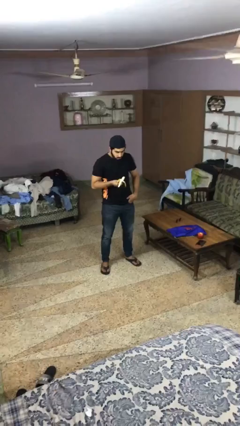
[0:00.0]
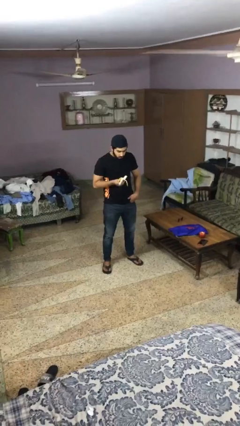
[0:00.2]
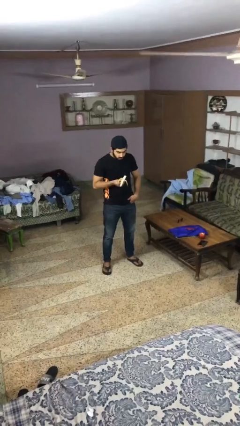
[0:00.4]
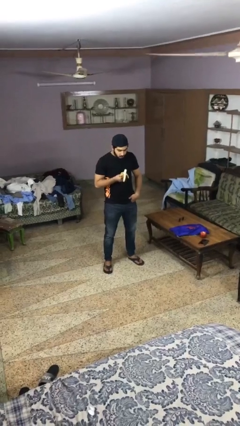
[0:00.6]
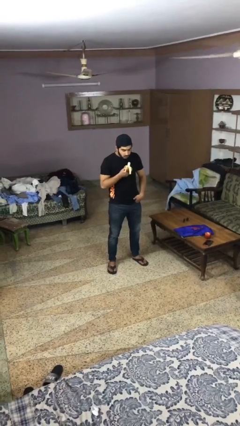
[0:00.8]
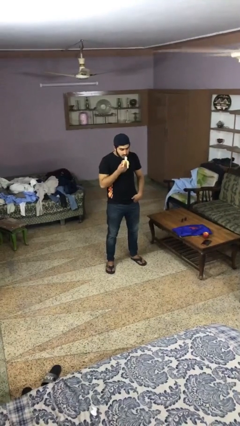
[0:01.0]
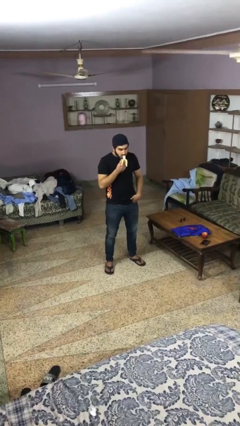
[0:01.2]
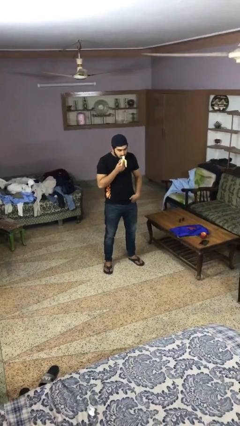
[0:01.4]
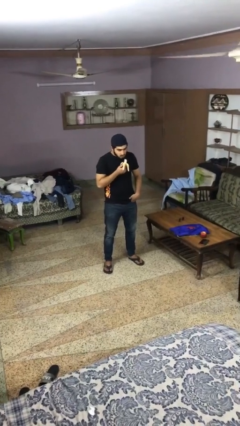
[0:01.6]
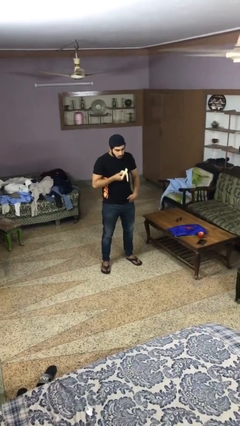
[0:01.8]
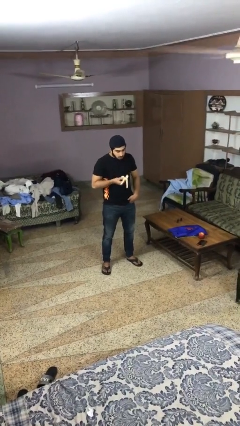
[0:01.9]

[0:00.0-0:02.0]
person eats banana

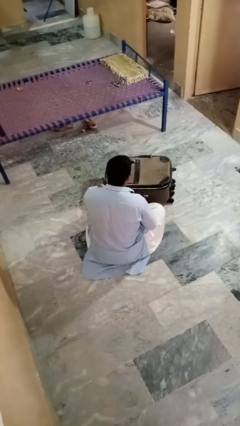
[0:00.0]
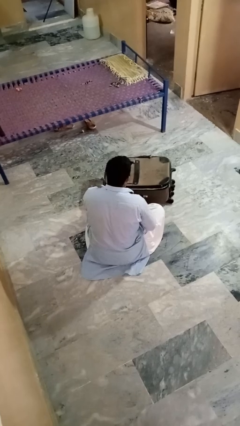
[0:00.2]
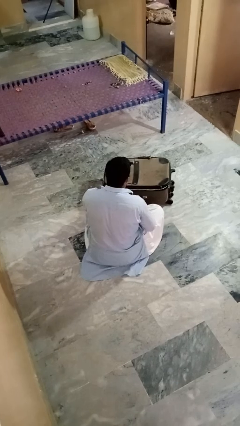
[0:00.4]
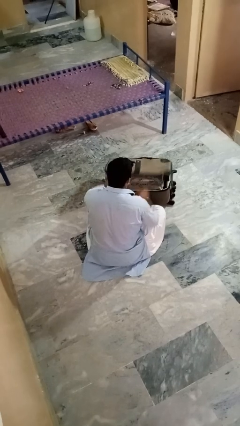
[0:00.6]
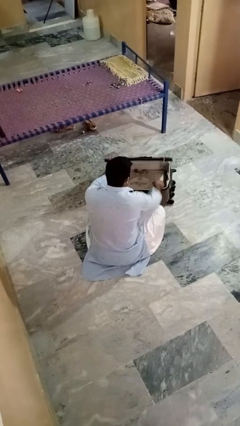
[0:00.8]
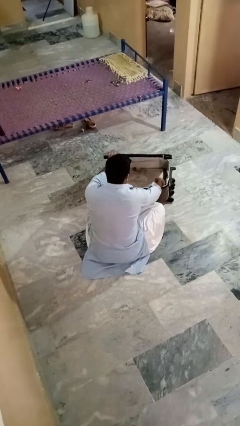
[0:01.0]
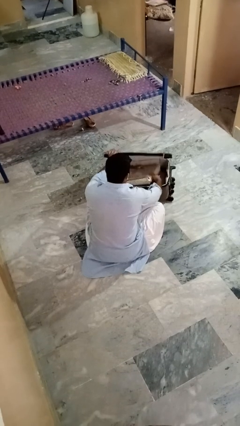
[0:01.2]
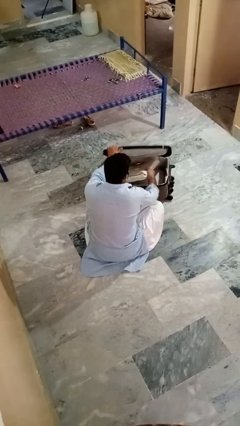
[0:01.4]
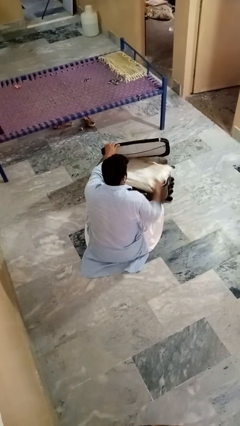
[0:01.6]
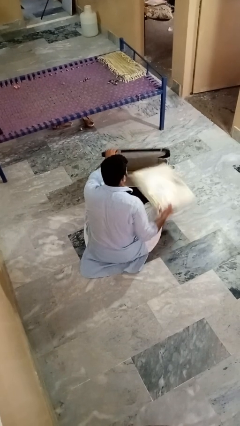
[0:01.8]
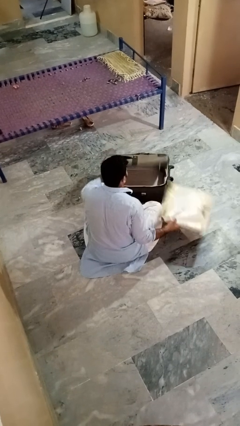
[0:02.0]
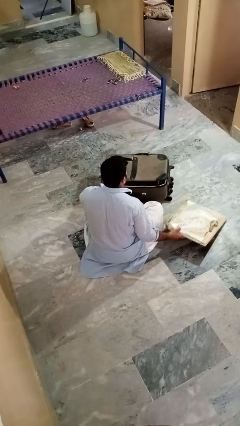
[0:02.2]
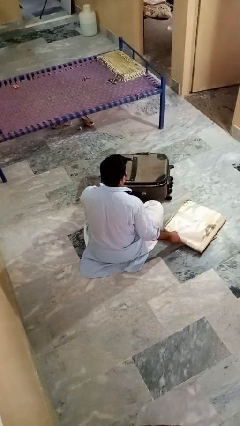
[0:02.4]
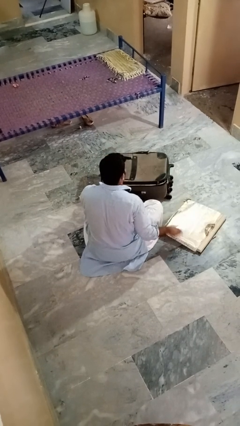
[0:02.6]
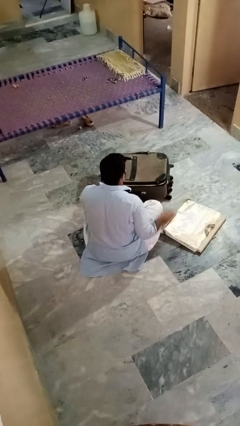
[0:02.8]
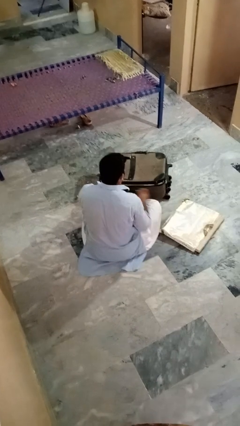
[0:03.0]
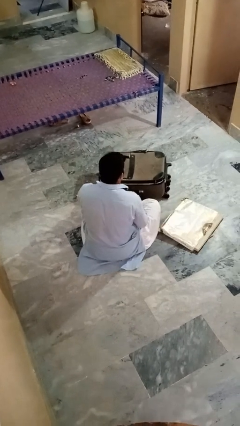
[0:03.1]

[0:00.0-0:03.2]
person takes object from bag

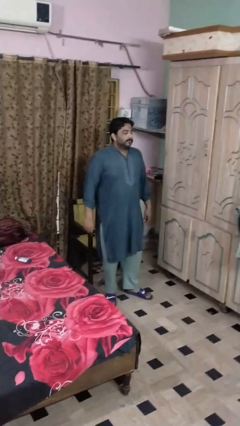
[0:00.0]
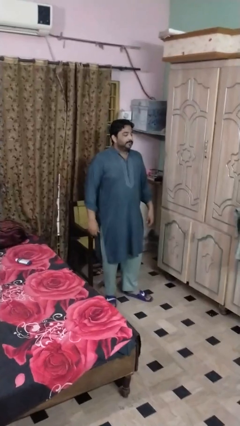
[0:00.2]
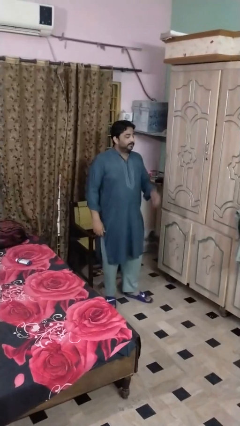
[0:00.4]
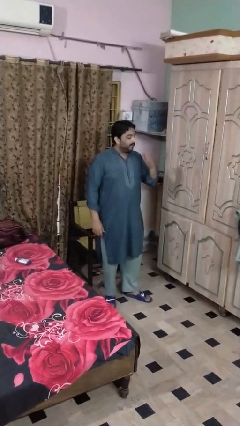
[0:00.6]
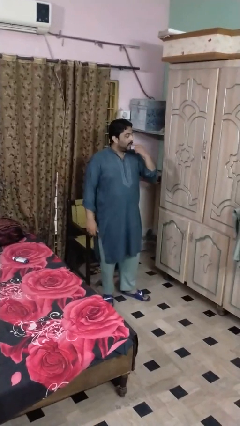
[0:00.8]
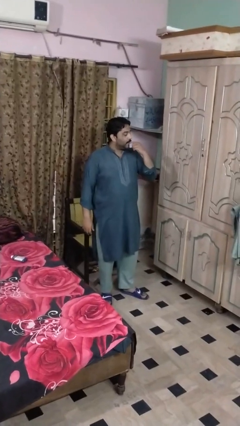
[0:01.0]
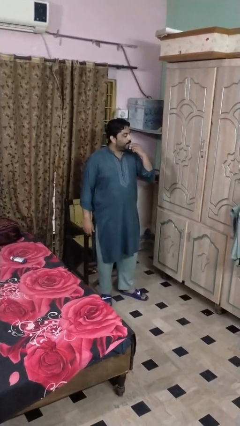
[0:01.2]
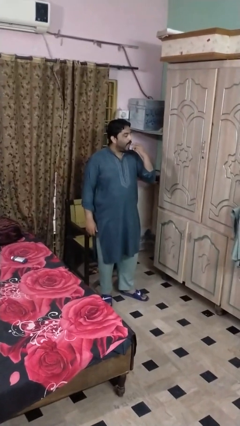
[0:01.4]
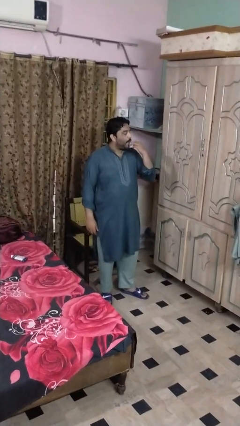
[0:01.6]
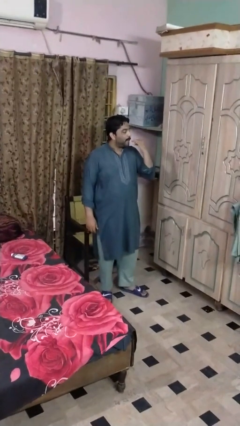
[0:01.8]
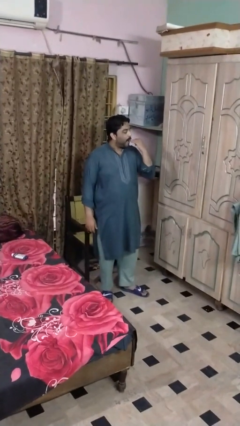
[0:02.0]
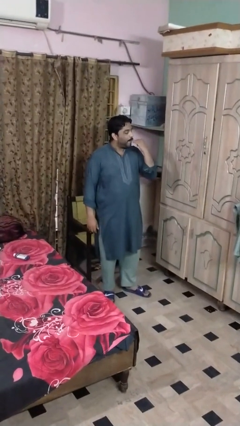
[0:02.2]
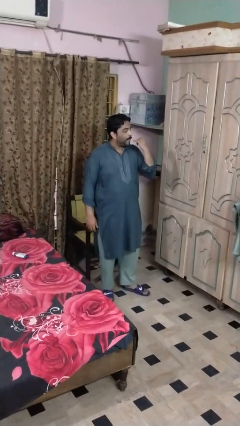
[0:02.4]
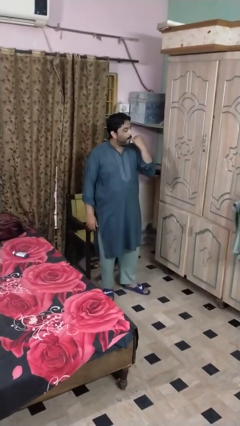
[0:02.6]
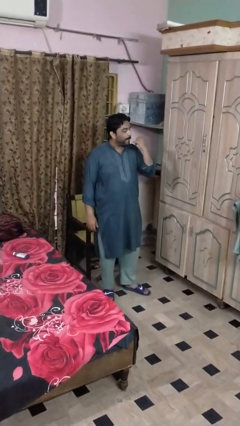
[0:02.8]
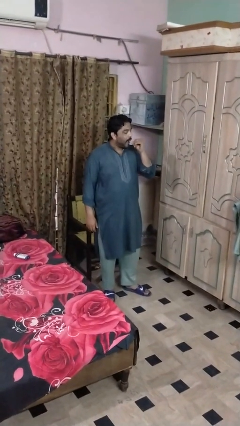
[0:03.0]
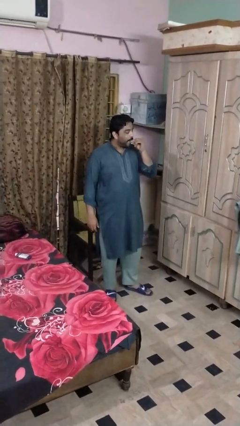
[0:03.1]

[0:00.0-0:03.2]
person licks fingers

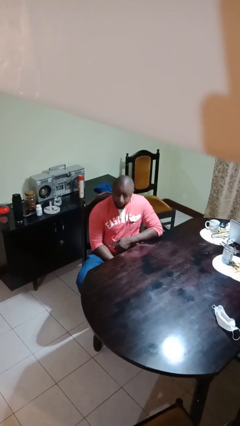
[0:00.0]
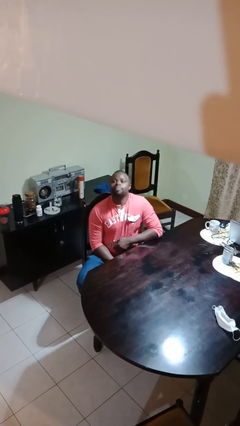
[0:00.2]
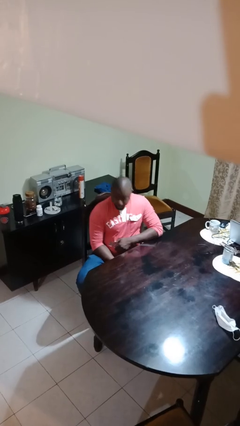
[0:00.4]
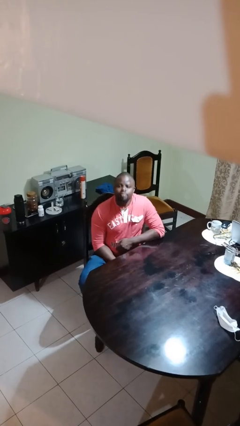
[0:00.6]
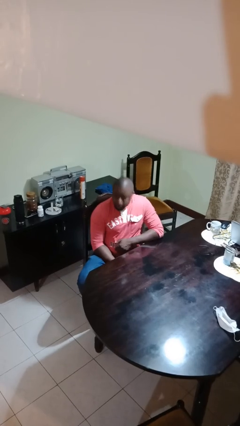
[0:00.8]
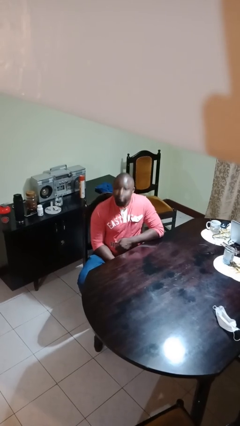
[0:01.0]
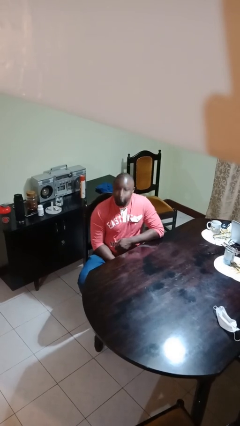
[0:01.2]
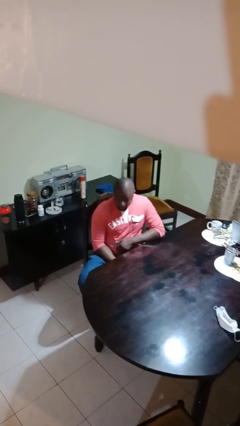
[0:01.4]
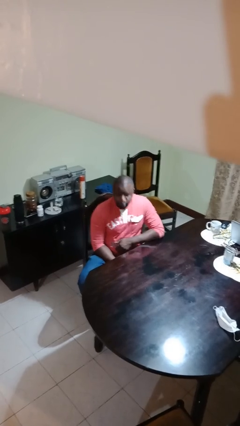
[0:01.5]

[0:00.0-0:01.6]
person nods head

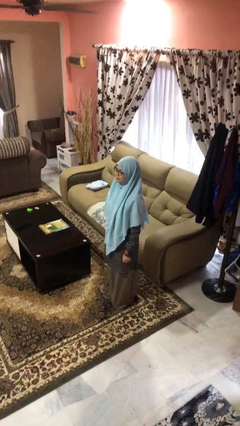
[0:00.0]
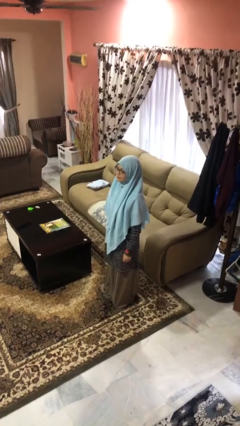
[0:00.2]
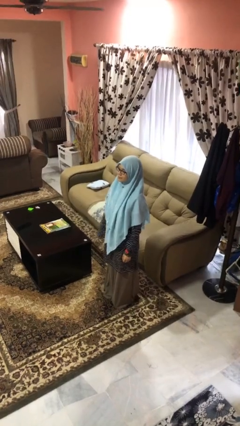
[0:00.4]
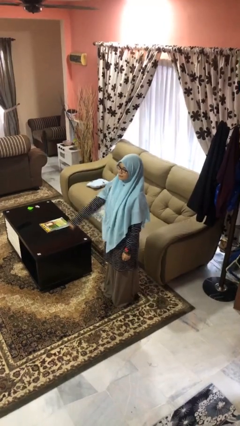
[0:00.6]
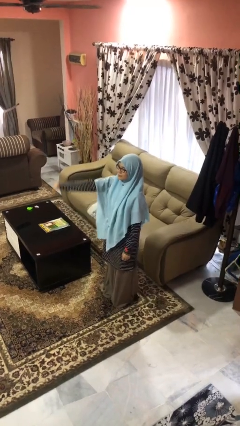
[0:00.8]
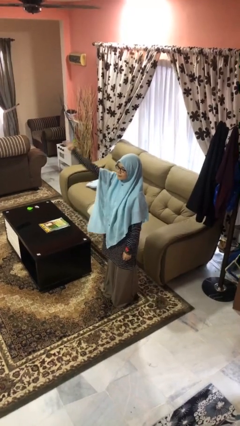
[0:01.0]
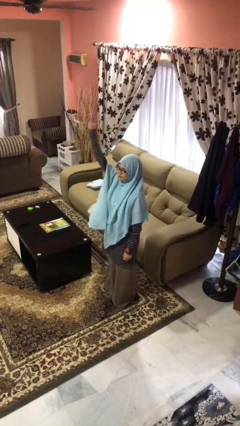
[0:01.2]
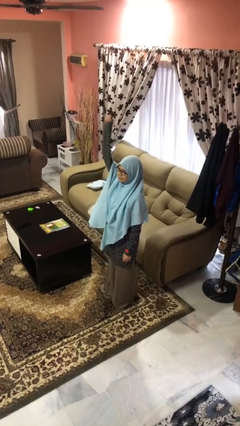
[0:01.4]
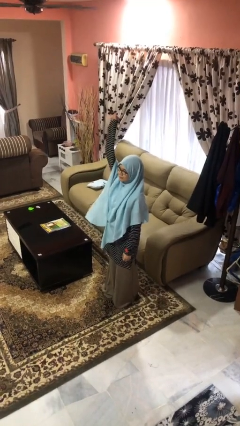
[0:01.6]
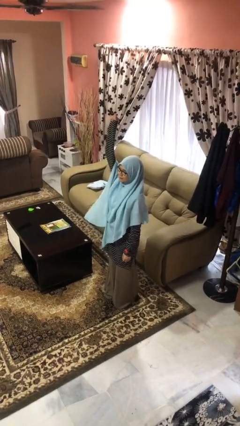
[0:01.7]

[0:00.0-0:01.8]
person gestures raise hand

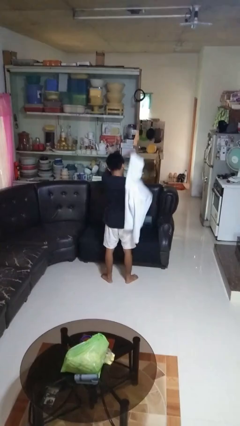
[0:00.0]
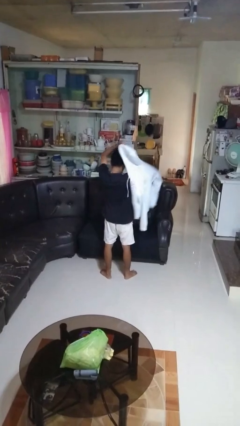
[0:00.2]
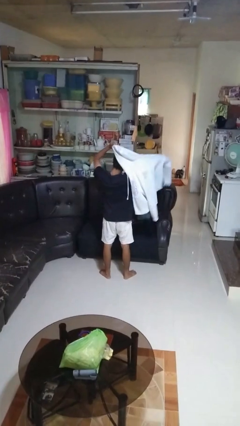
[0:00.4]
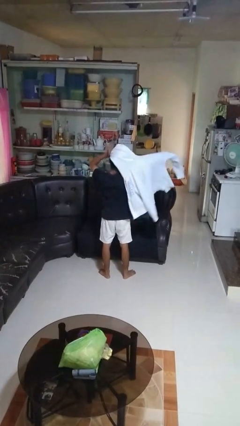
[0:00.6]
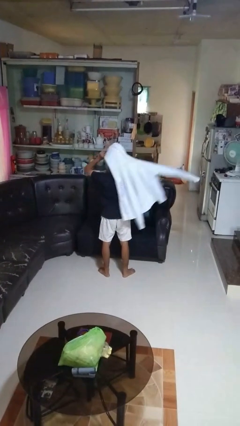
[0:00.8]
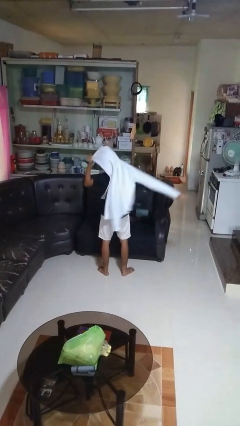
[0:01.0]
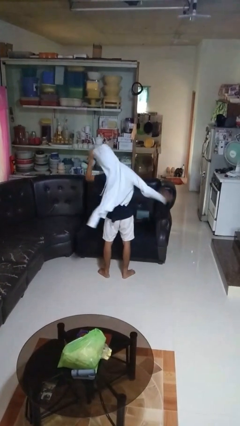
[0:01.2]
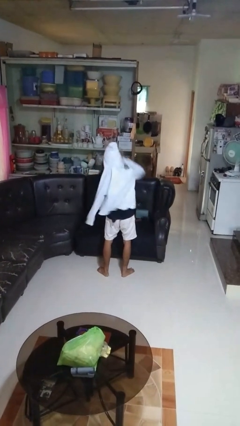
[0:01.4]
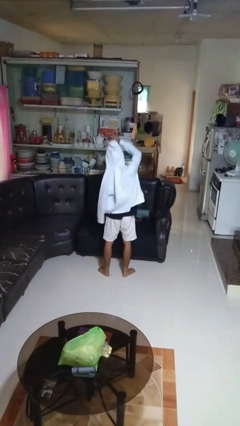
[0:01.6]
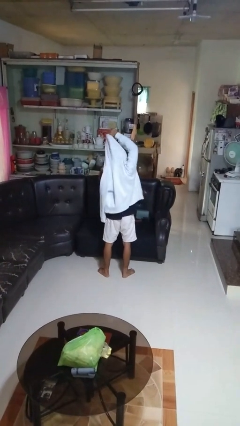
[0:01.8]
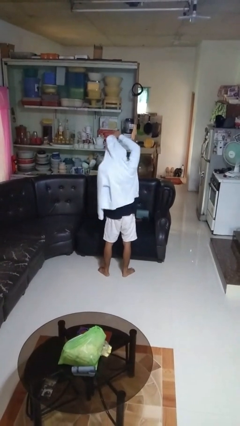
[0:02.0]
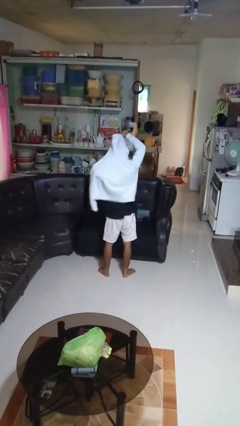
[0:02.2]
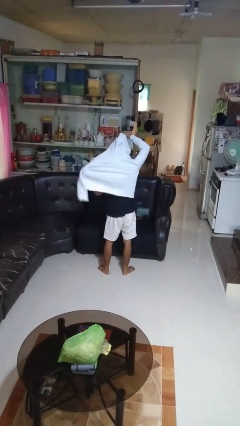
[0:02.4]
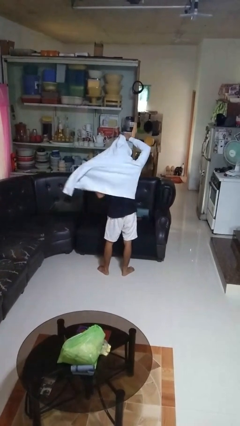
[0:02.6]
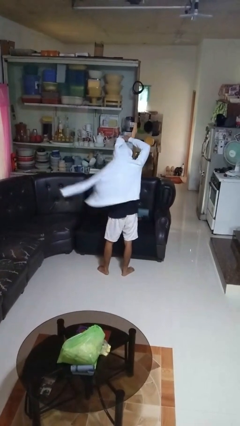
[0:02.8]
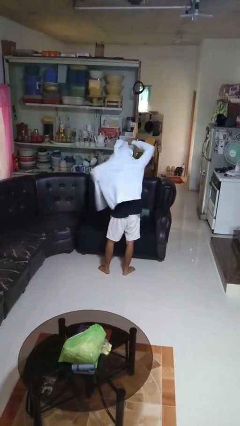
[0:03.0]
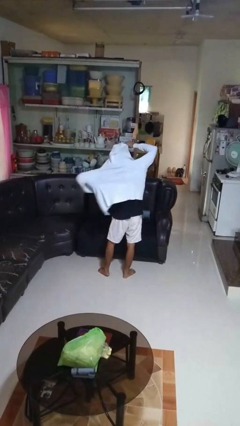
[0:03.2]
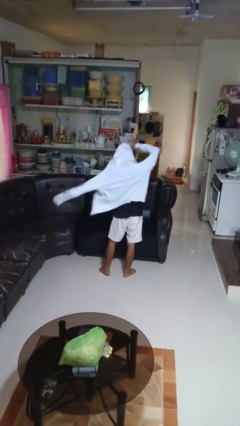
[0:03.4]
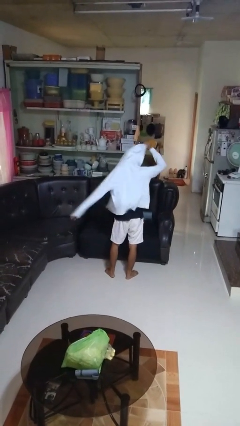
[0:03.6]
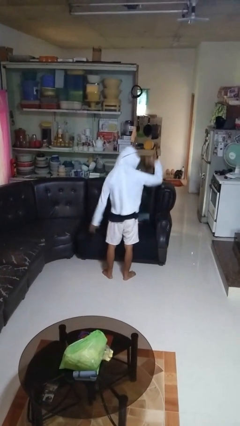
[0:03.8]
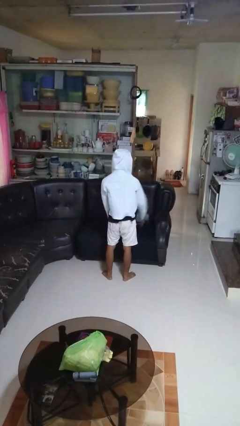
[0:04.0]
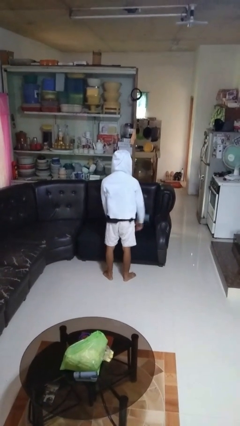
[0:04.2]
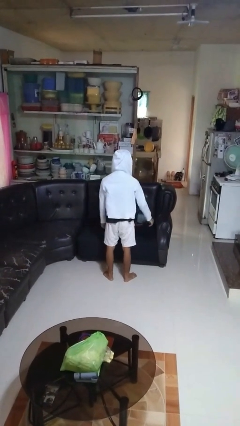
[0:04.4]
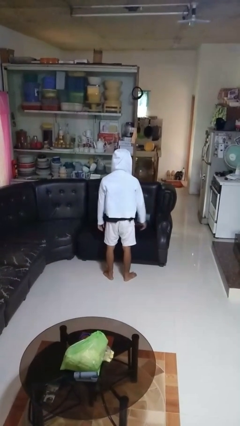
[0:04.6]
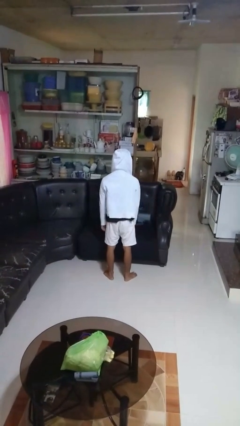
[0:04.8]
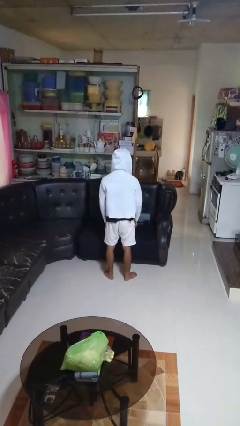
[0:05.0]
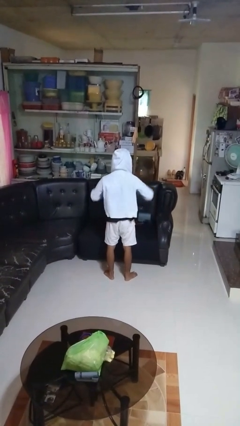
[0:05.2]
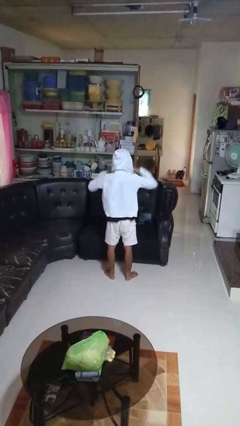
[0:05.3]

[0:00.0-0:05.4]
person puts on hoodie
